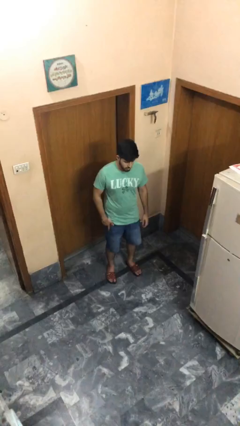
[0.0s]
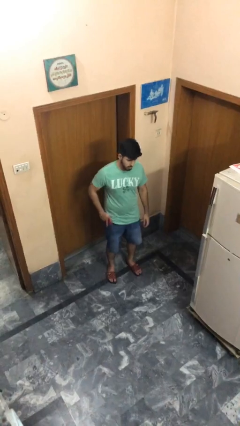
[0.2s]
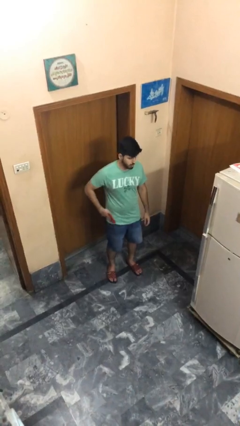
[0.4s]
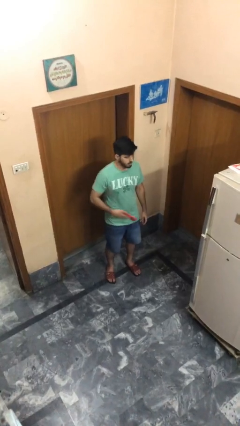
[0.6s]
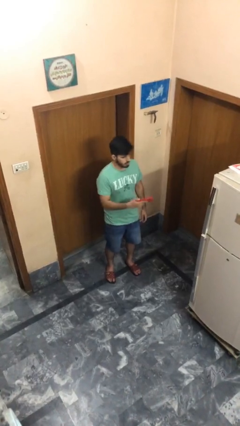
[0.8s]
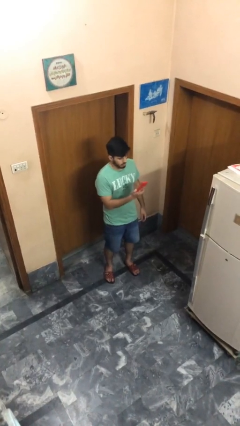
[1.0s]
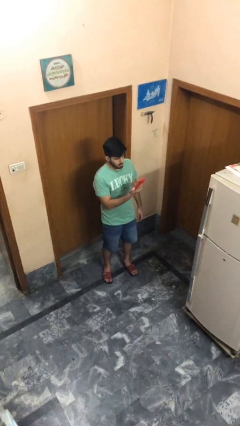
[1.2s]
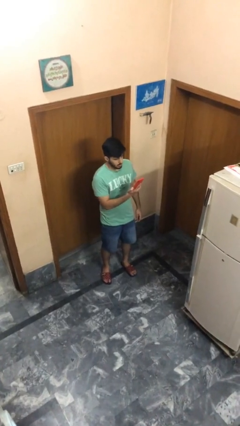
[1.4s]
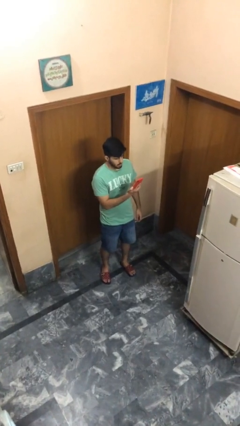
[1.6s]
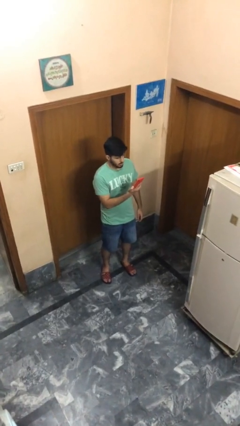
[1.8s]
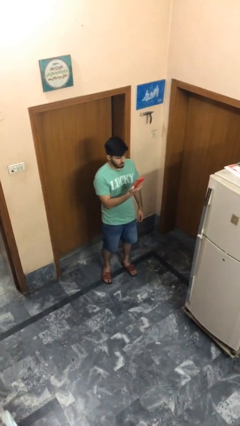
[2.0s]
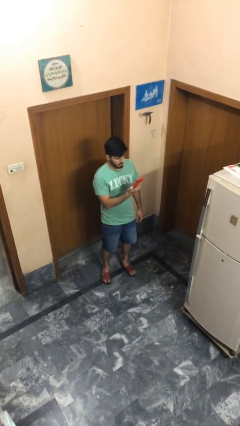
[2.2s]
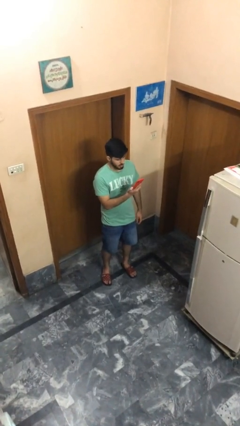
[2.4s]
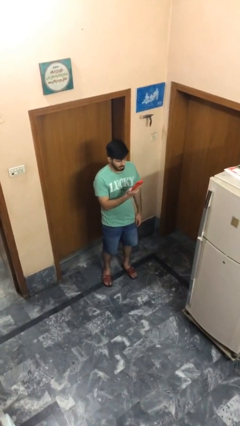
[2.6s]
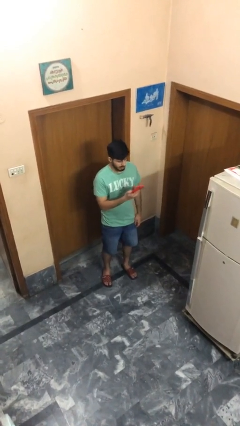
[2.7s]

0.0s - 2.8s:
person takes phone from pocket

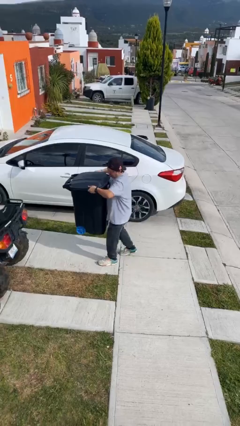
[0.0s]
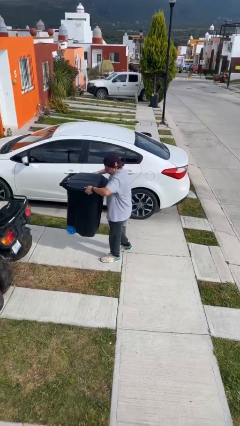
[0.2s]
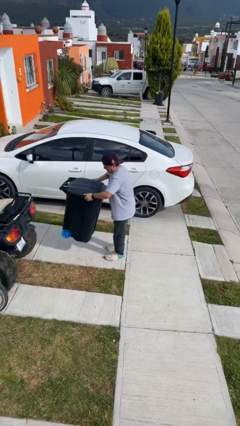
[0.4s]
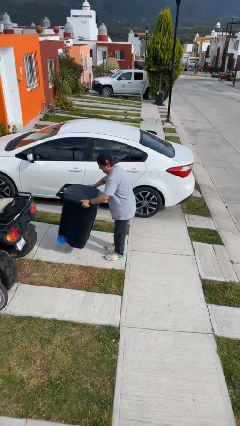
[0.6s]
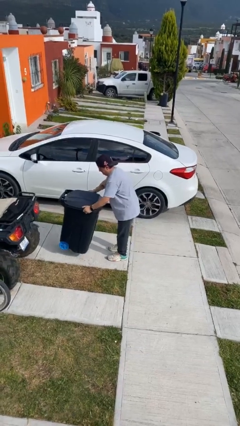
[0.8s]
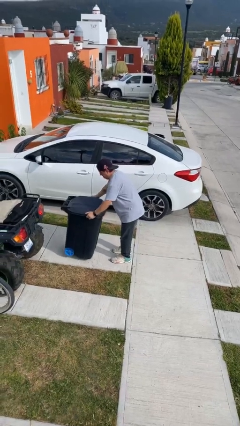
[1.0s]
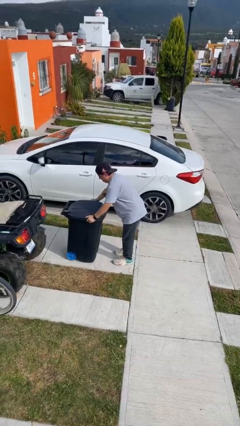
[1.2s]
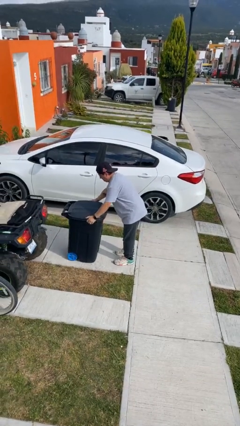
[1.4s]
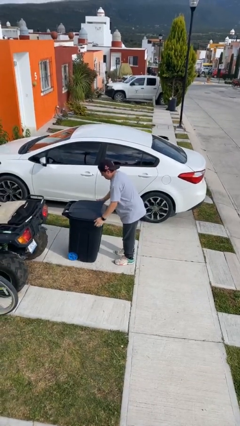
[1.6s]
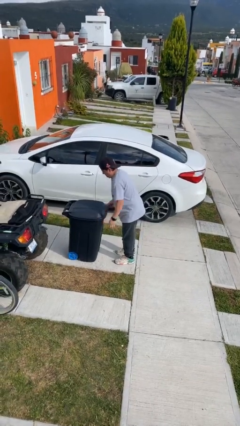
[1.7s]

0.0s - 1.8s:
person puts down object on floor

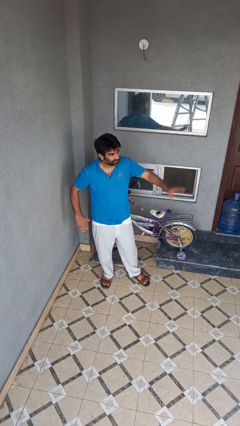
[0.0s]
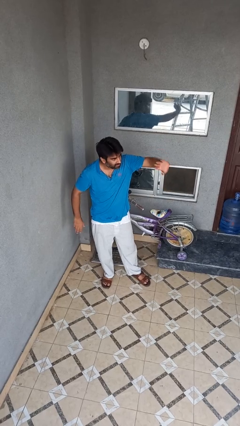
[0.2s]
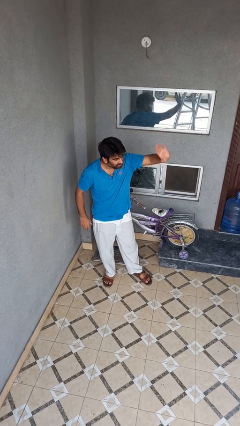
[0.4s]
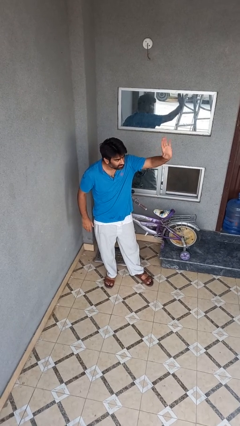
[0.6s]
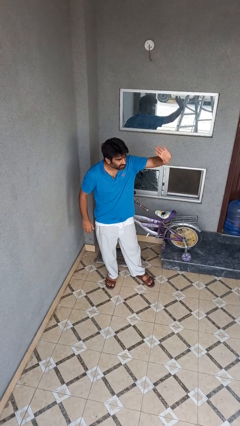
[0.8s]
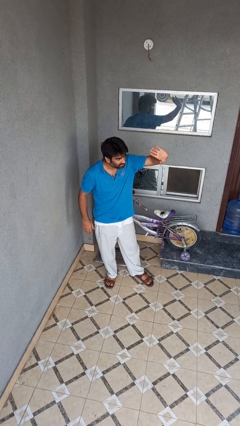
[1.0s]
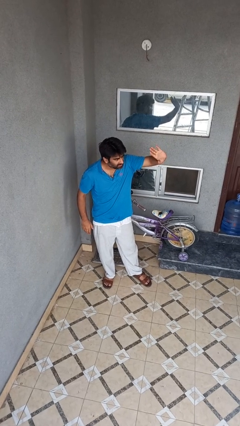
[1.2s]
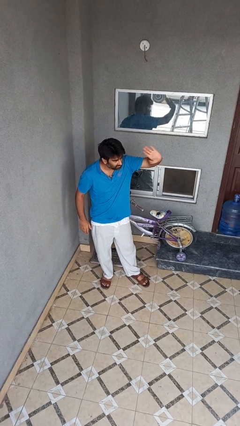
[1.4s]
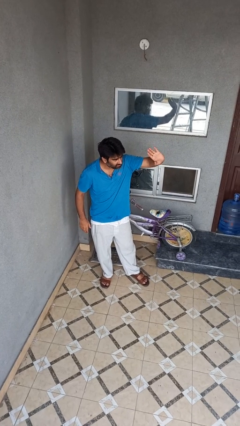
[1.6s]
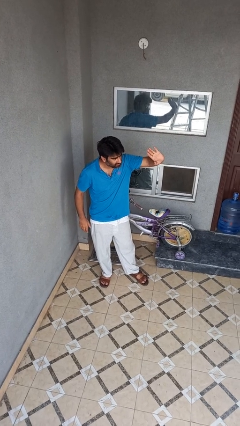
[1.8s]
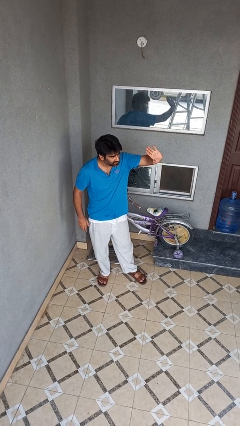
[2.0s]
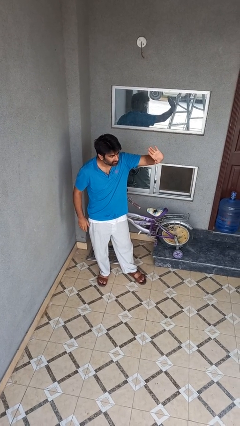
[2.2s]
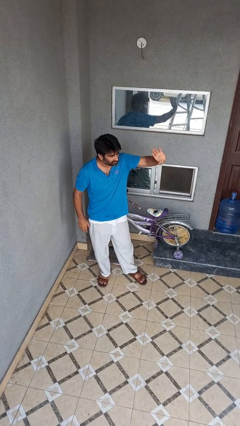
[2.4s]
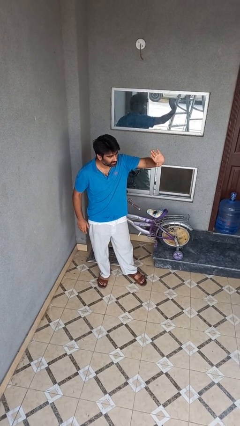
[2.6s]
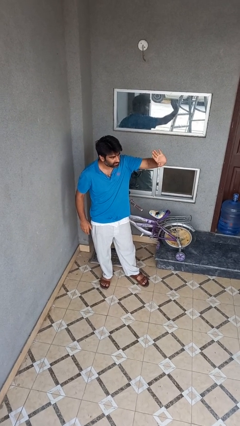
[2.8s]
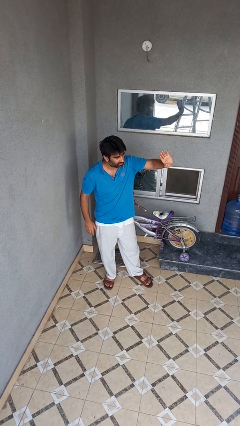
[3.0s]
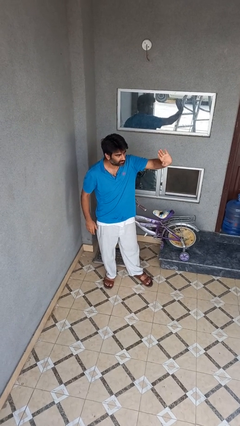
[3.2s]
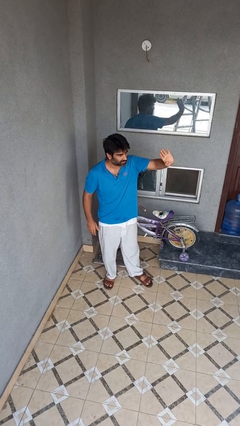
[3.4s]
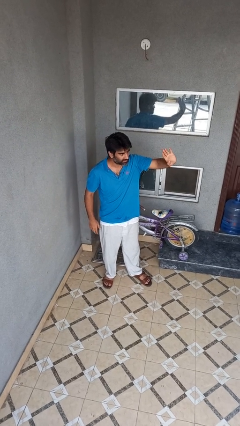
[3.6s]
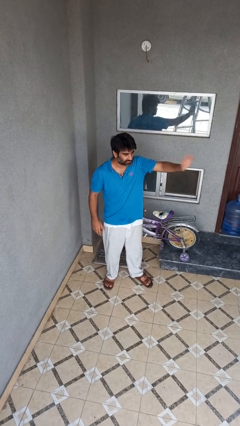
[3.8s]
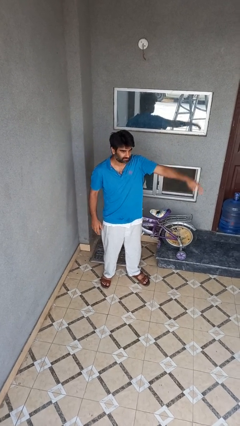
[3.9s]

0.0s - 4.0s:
person waves at person

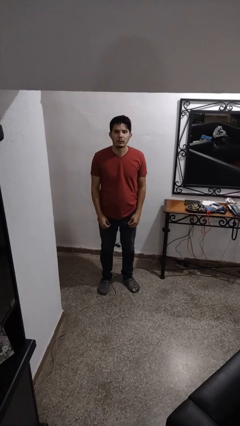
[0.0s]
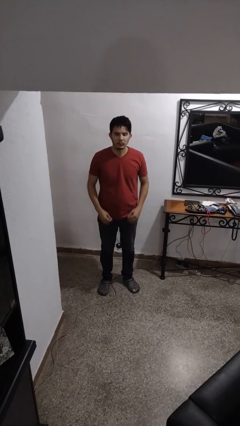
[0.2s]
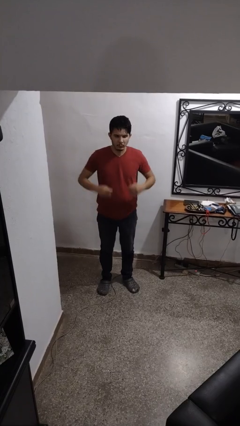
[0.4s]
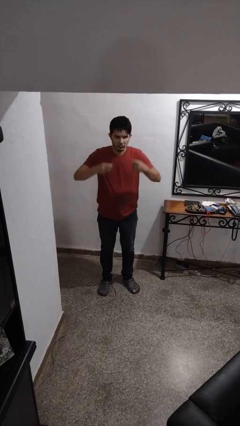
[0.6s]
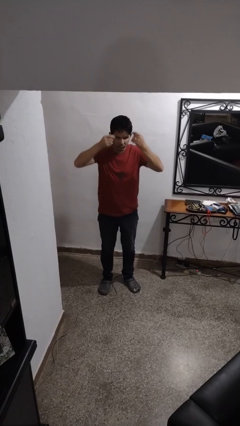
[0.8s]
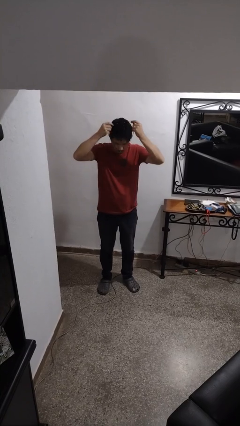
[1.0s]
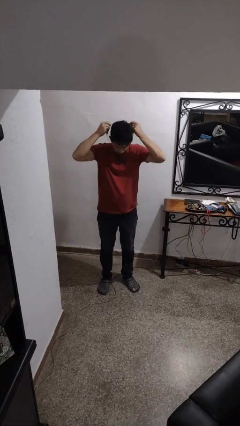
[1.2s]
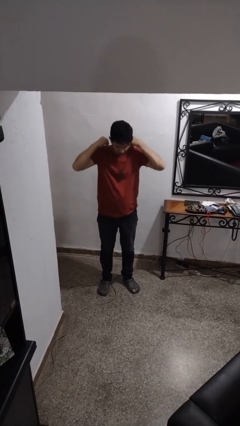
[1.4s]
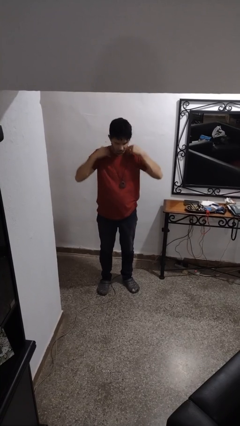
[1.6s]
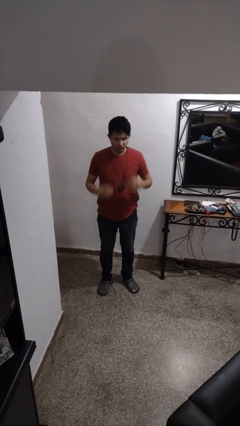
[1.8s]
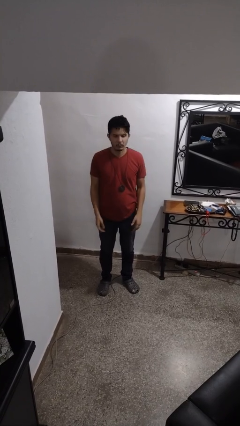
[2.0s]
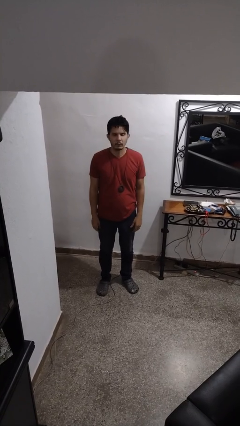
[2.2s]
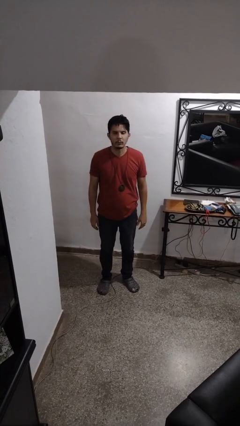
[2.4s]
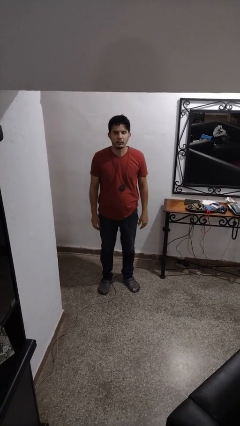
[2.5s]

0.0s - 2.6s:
person puts on necklace

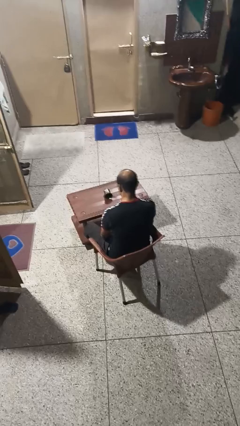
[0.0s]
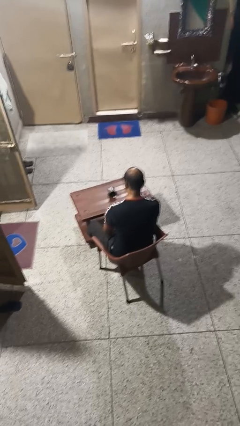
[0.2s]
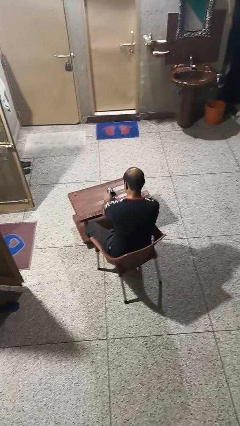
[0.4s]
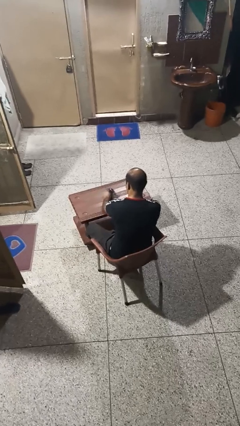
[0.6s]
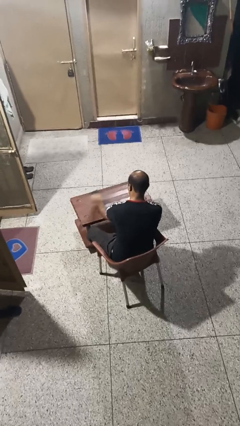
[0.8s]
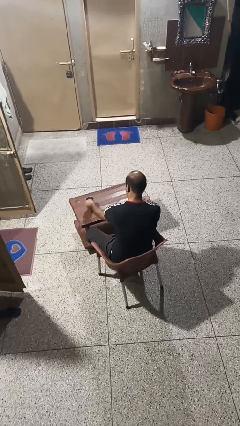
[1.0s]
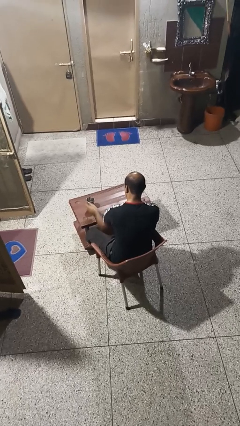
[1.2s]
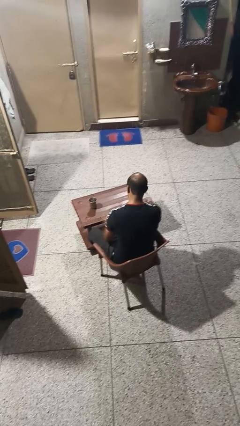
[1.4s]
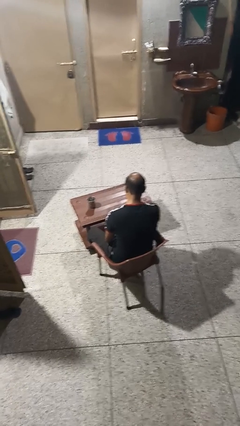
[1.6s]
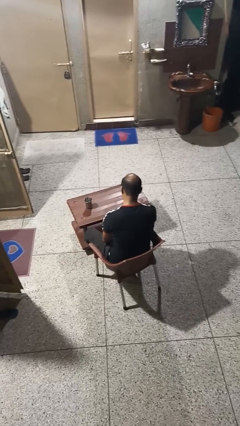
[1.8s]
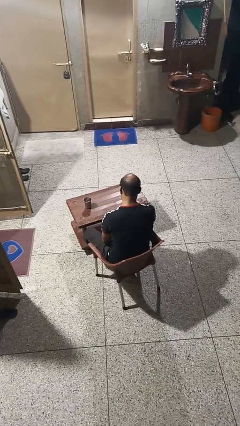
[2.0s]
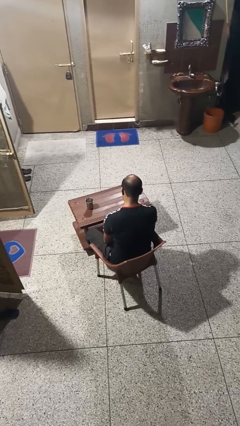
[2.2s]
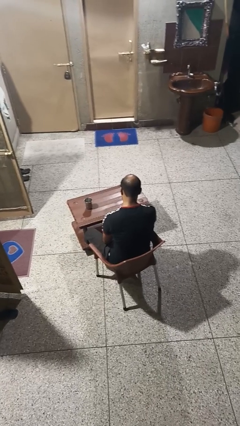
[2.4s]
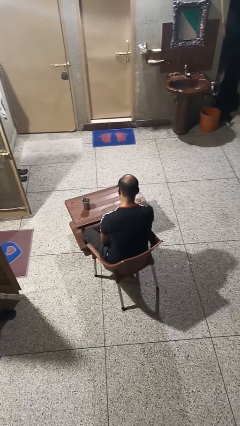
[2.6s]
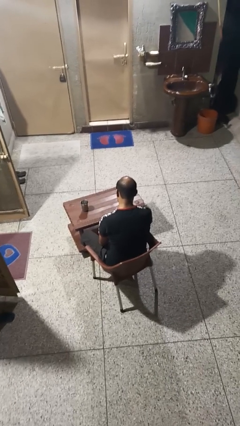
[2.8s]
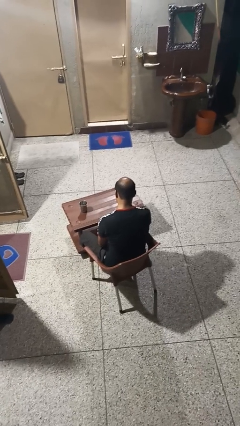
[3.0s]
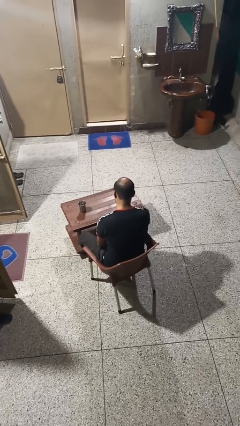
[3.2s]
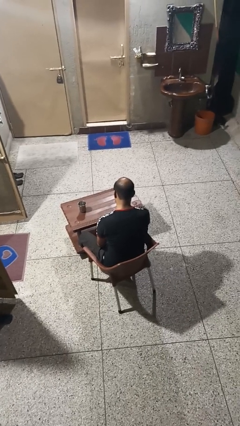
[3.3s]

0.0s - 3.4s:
person sets upright glass

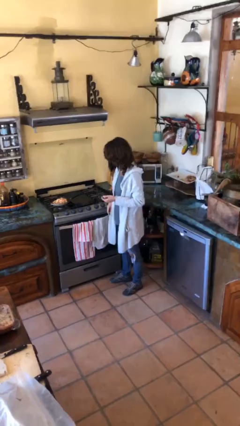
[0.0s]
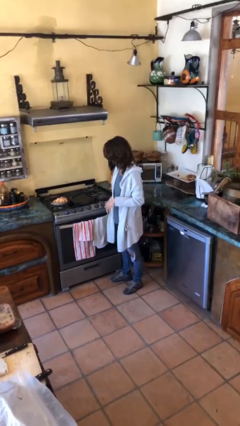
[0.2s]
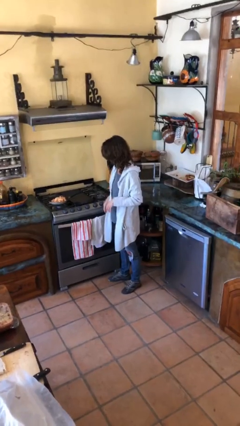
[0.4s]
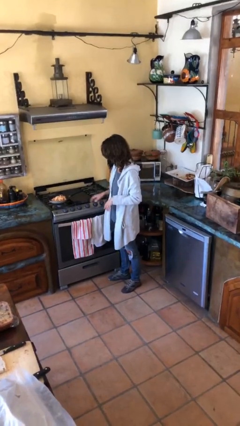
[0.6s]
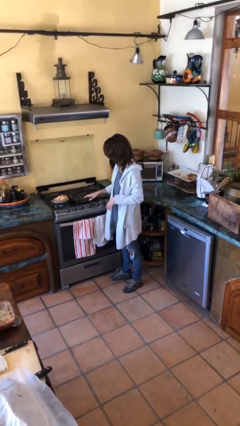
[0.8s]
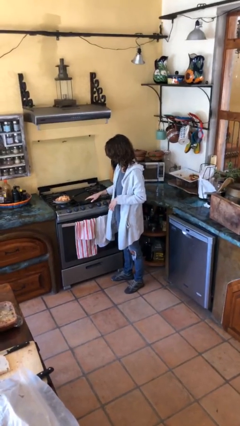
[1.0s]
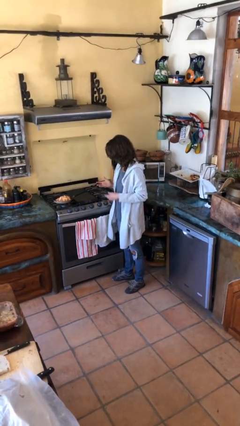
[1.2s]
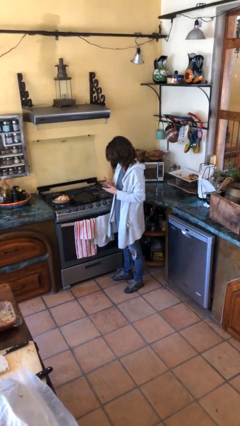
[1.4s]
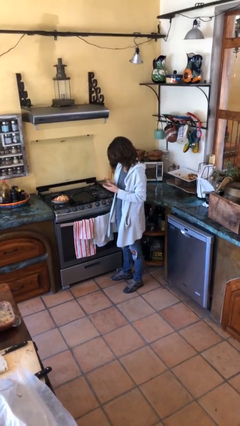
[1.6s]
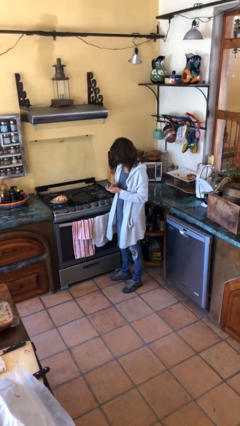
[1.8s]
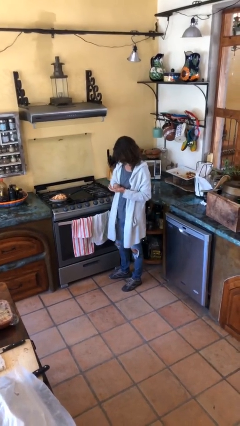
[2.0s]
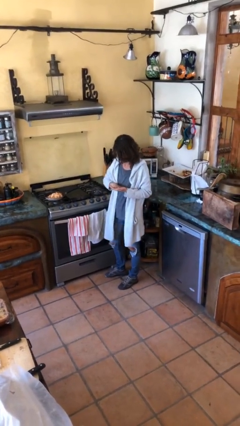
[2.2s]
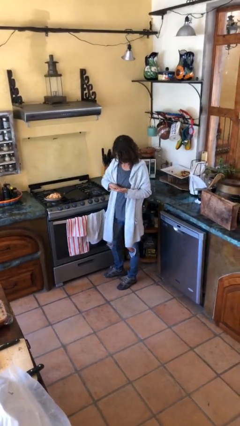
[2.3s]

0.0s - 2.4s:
person burns hand

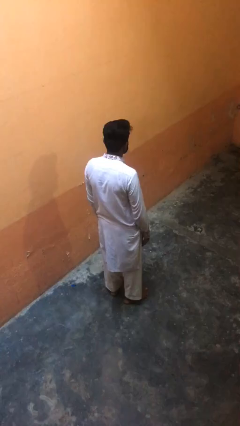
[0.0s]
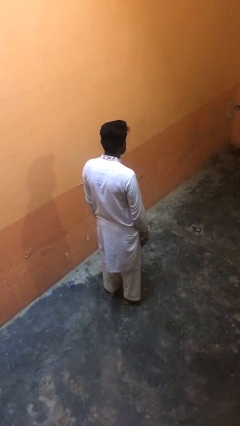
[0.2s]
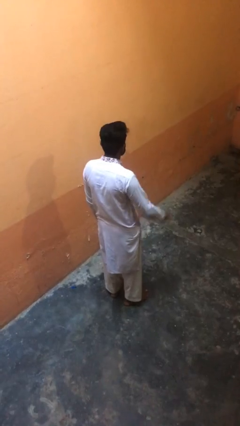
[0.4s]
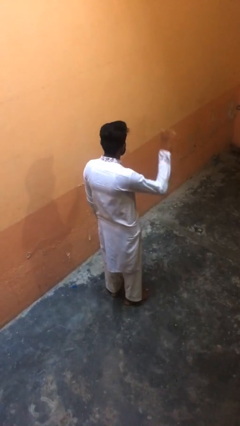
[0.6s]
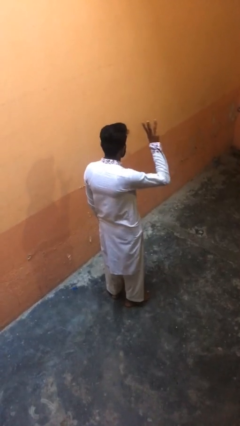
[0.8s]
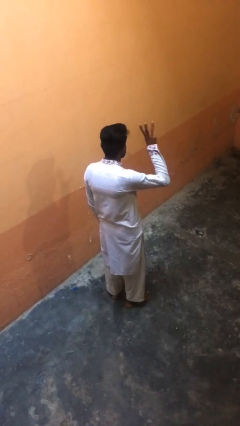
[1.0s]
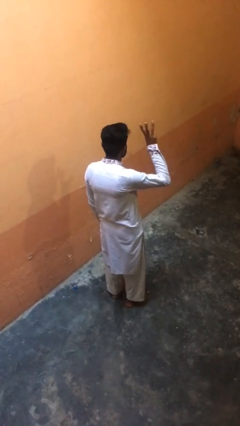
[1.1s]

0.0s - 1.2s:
person gestures number three
